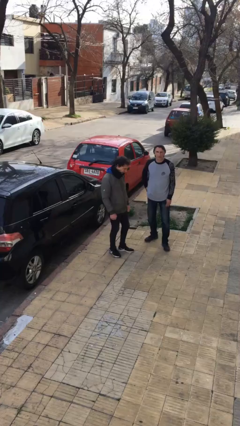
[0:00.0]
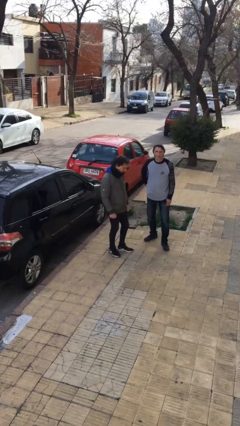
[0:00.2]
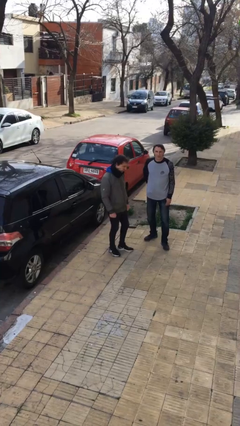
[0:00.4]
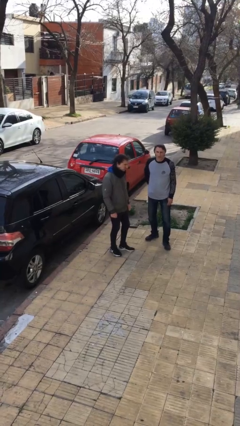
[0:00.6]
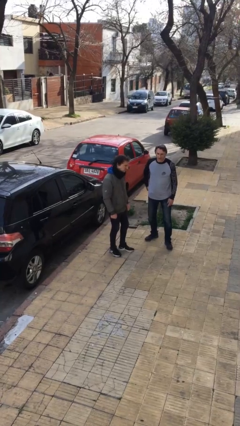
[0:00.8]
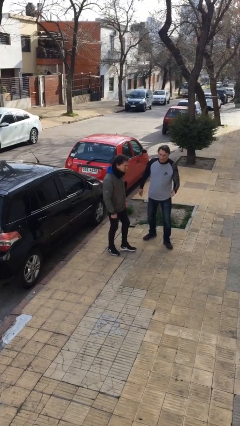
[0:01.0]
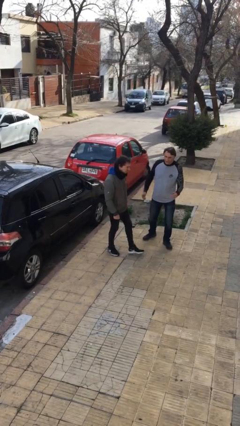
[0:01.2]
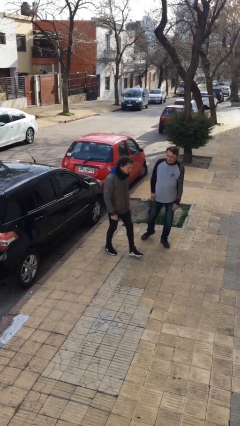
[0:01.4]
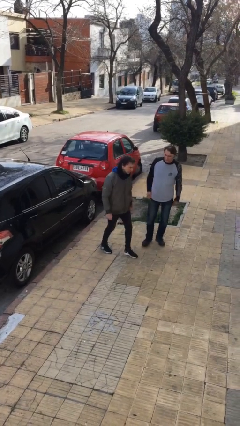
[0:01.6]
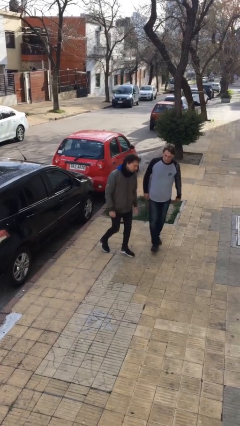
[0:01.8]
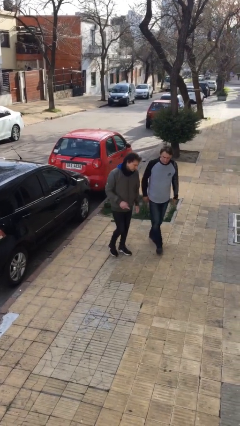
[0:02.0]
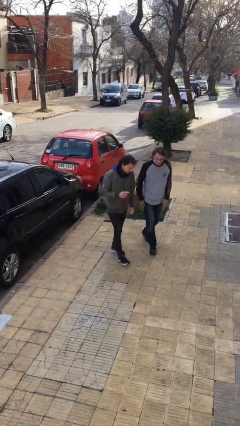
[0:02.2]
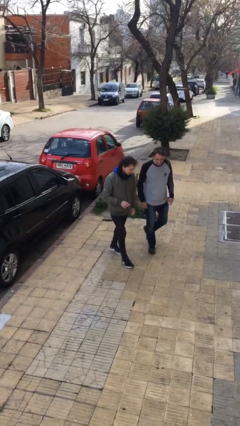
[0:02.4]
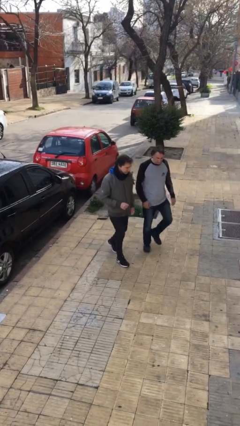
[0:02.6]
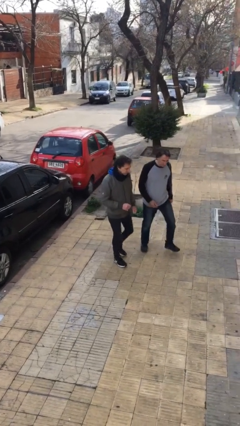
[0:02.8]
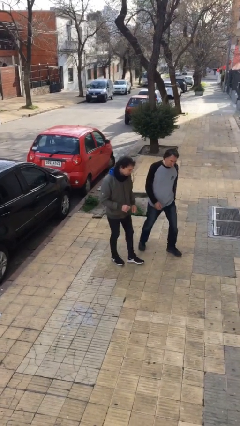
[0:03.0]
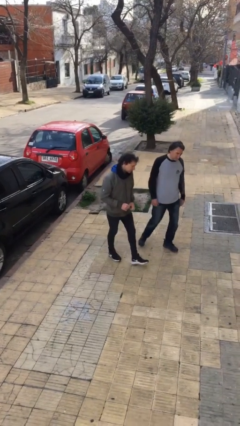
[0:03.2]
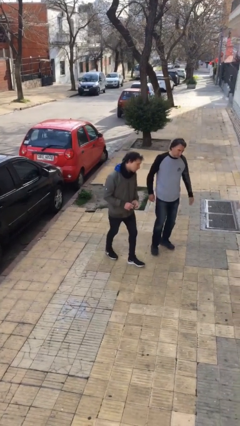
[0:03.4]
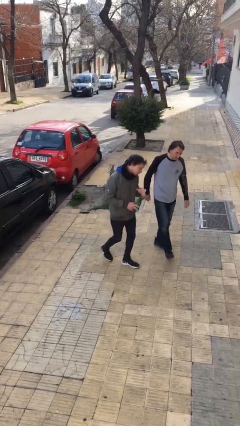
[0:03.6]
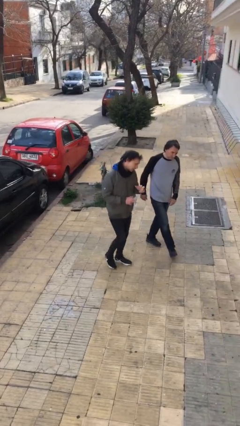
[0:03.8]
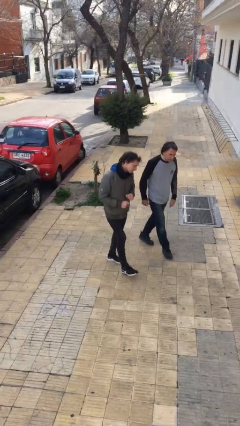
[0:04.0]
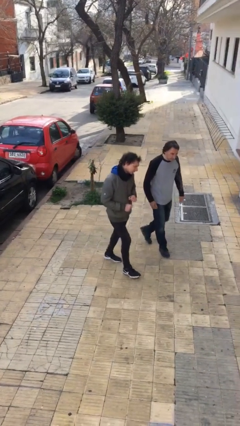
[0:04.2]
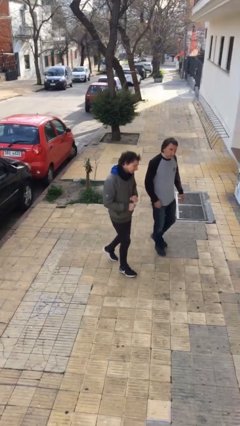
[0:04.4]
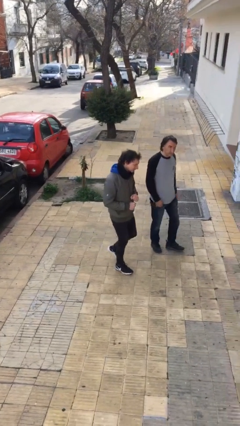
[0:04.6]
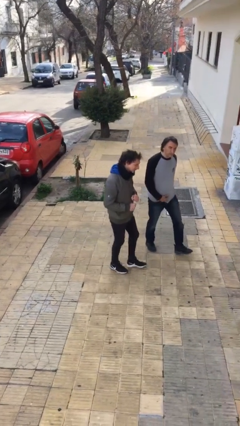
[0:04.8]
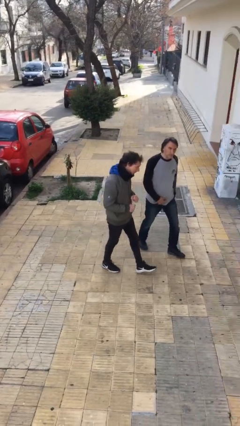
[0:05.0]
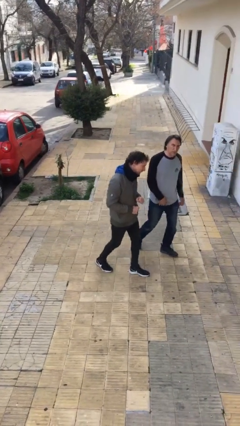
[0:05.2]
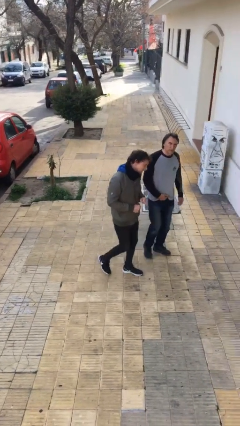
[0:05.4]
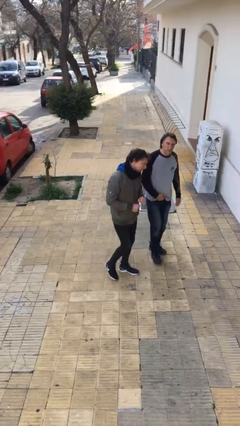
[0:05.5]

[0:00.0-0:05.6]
person talks to person

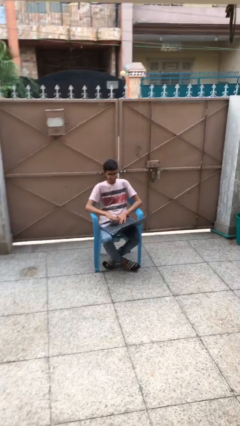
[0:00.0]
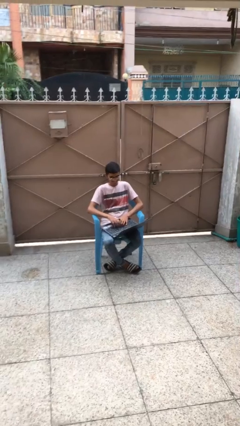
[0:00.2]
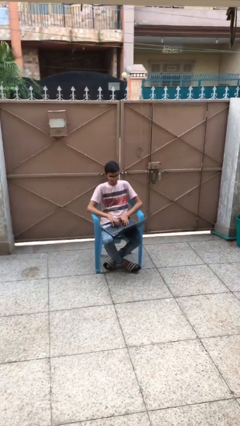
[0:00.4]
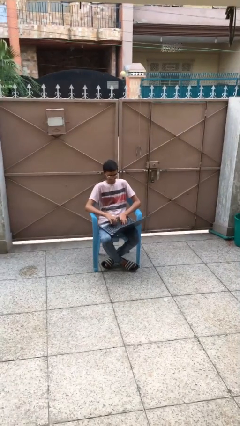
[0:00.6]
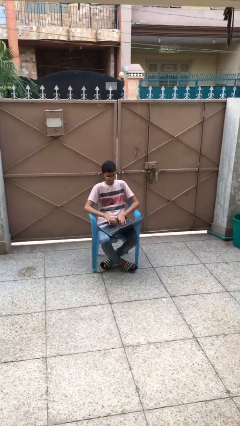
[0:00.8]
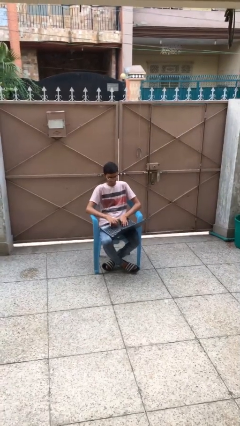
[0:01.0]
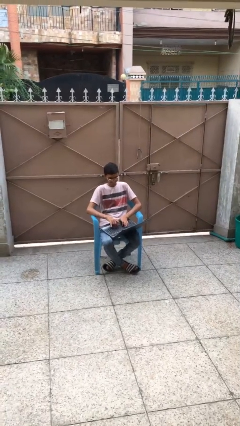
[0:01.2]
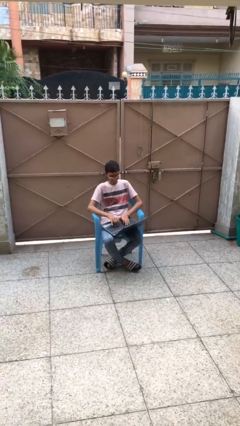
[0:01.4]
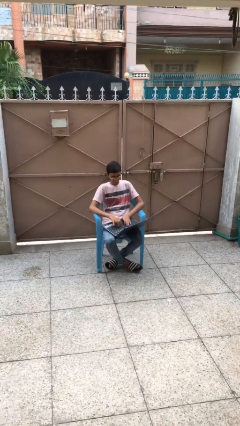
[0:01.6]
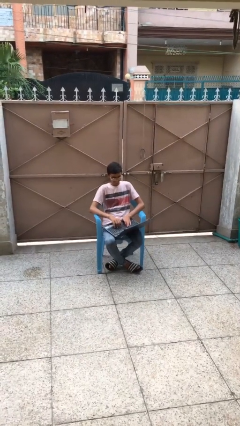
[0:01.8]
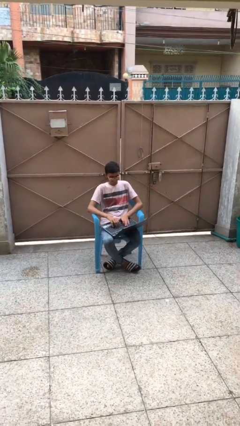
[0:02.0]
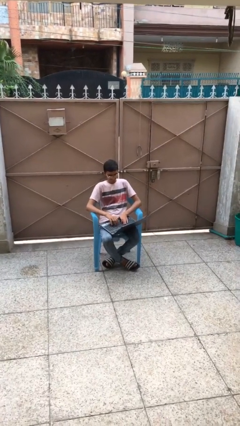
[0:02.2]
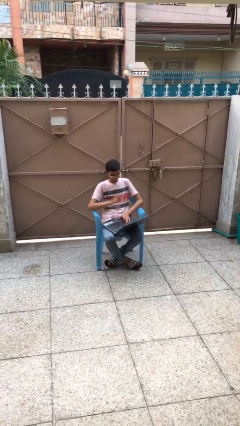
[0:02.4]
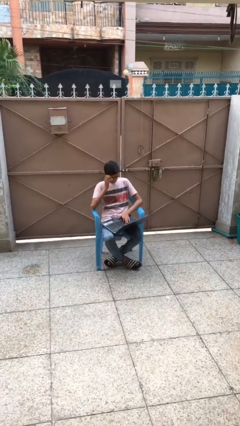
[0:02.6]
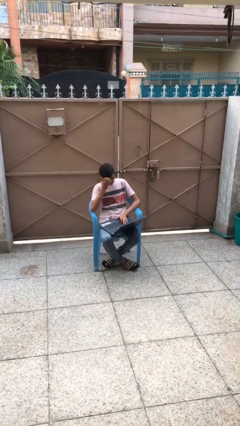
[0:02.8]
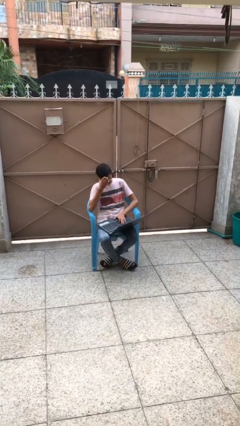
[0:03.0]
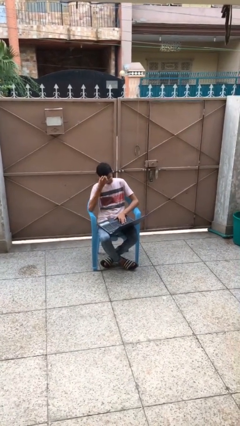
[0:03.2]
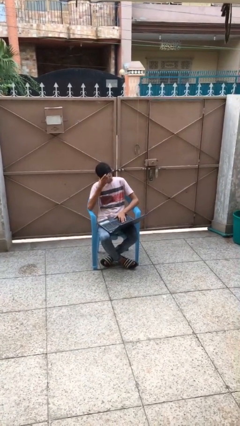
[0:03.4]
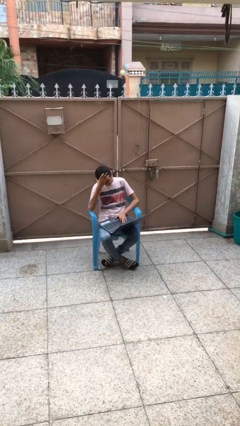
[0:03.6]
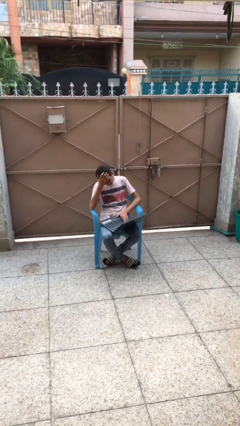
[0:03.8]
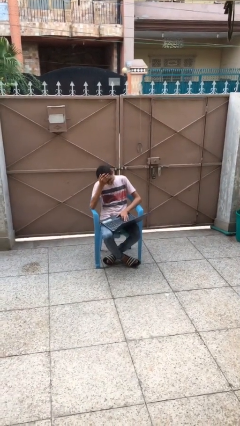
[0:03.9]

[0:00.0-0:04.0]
person interacts with laptop

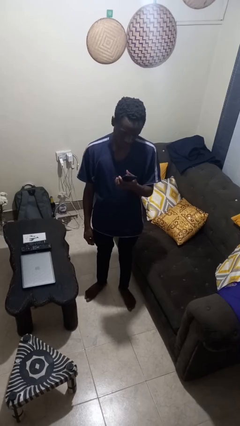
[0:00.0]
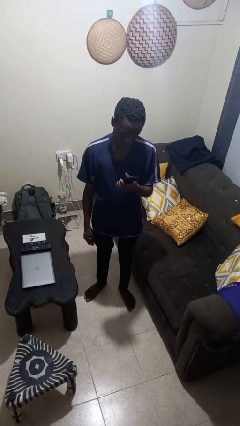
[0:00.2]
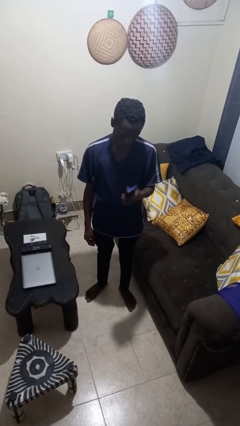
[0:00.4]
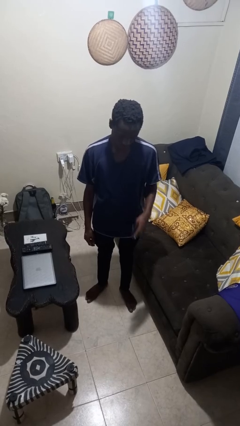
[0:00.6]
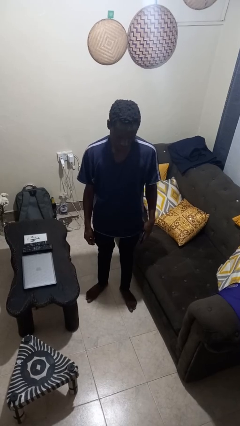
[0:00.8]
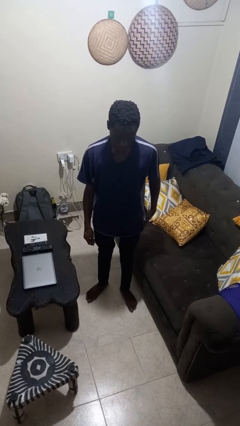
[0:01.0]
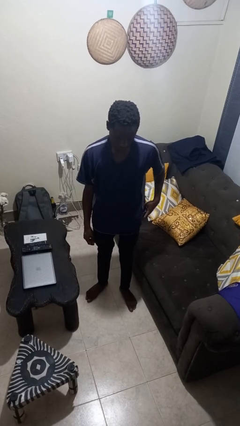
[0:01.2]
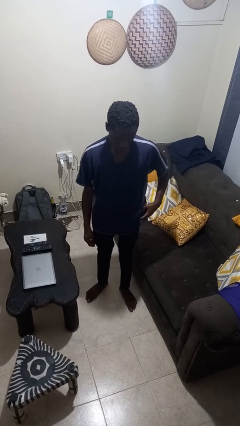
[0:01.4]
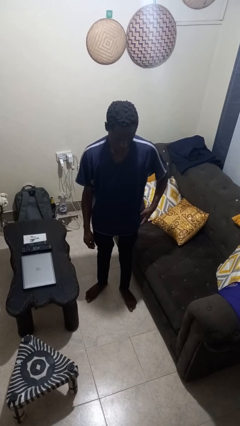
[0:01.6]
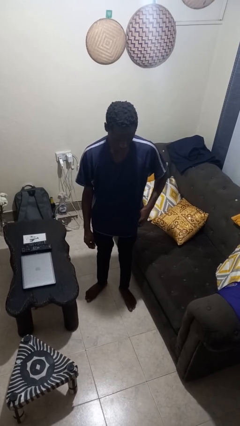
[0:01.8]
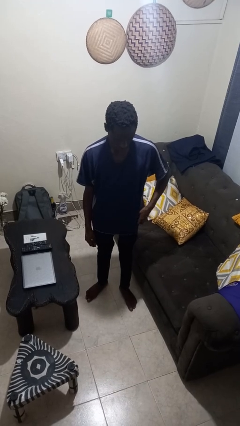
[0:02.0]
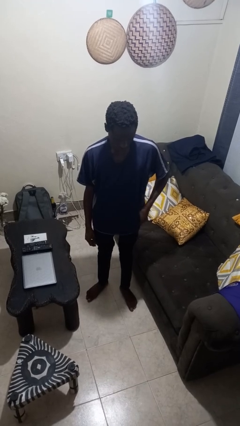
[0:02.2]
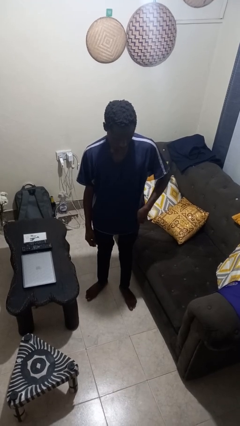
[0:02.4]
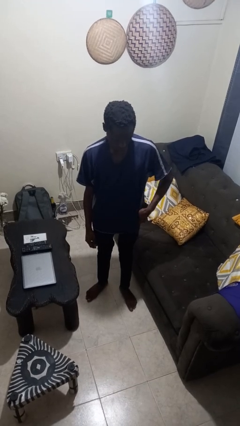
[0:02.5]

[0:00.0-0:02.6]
person puts phone into pocket

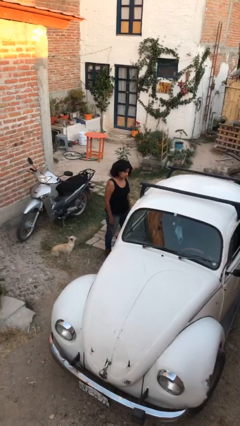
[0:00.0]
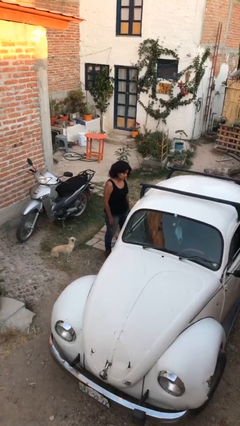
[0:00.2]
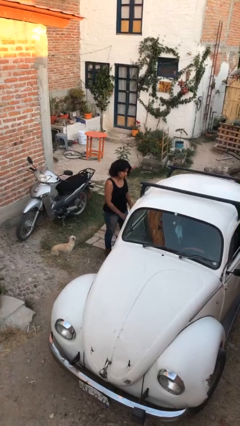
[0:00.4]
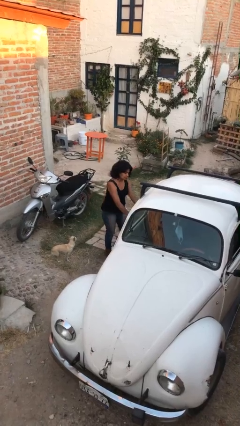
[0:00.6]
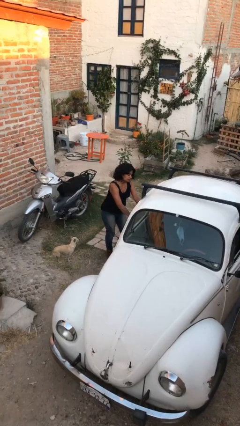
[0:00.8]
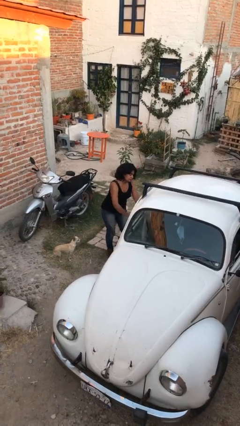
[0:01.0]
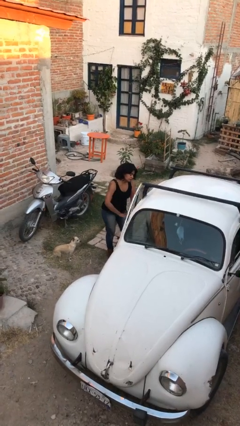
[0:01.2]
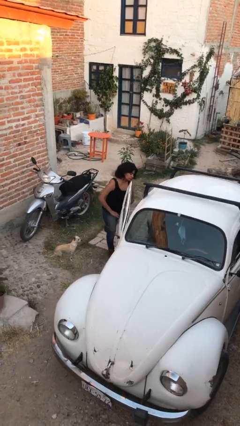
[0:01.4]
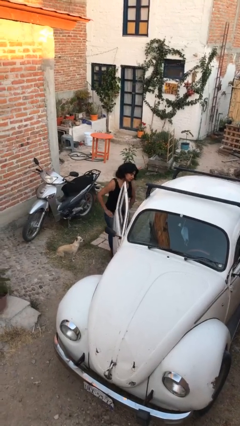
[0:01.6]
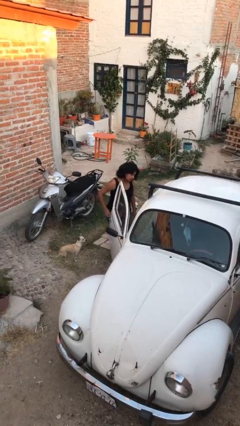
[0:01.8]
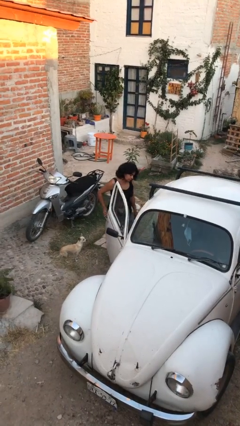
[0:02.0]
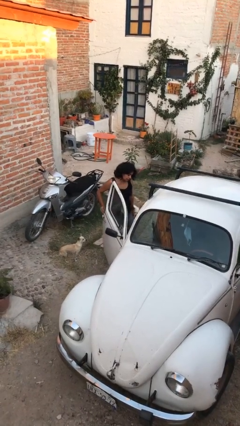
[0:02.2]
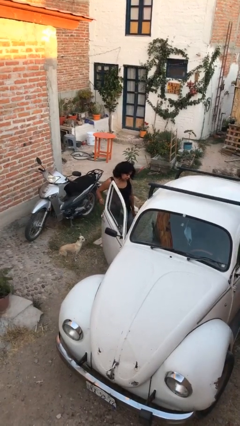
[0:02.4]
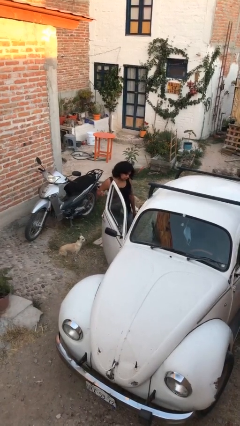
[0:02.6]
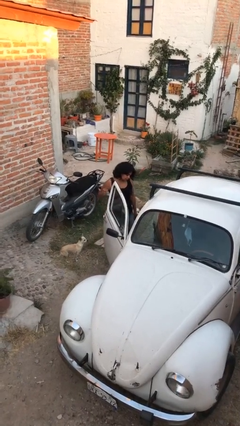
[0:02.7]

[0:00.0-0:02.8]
person opens car door

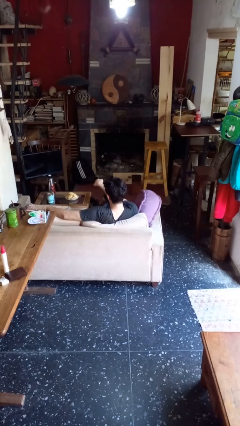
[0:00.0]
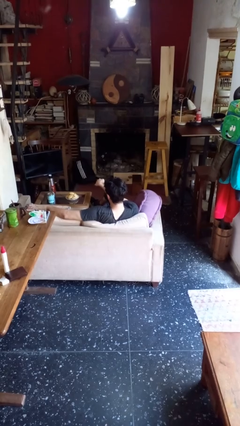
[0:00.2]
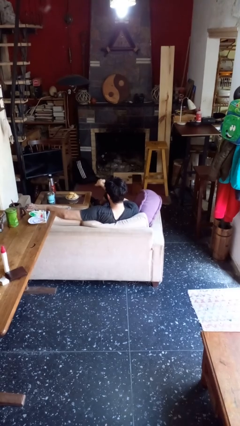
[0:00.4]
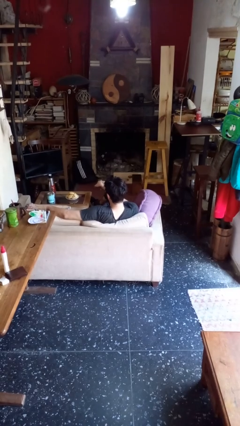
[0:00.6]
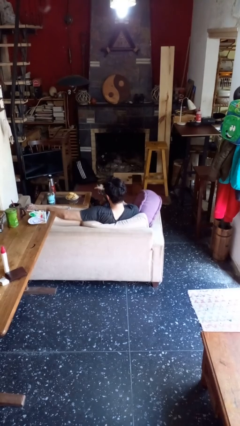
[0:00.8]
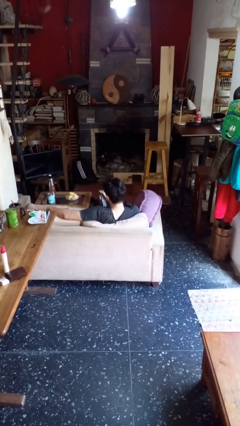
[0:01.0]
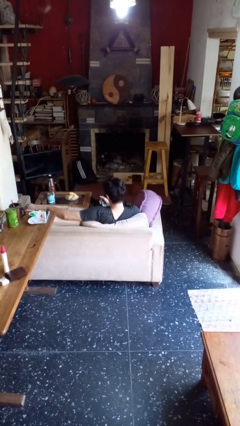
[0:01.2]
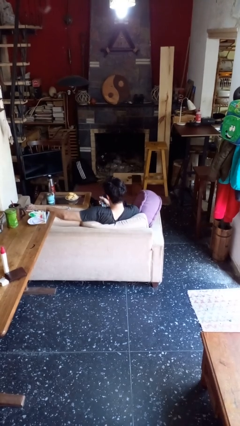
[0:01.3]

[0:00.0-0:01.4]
person uses television remote

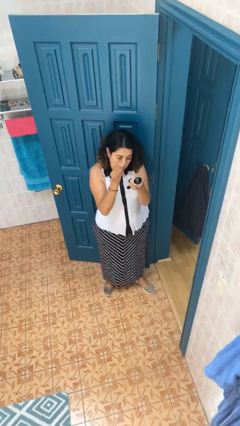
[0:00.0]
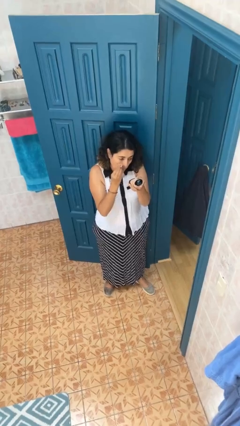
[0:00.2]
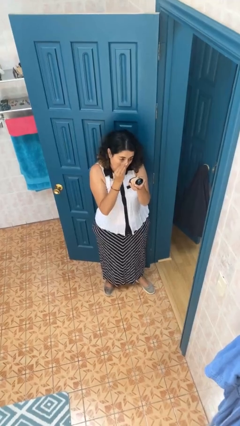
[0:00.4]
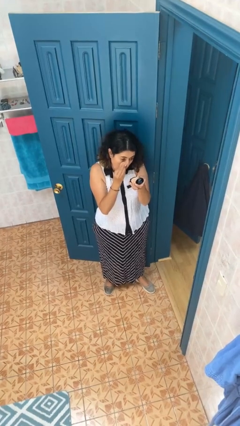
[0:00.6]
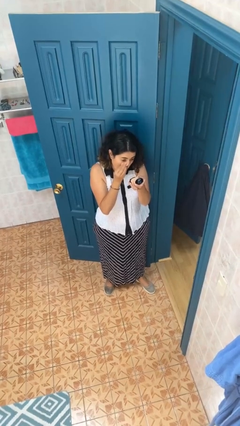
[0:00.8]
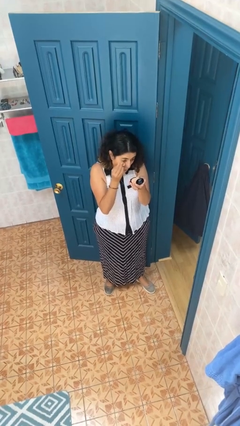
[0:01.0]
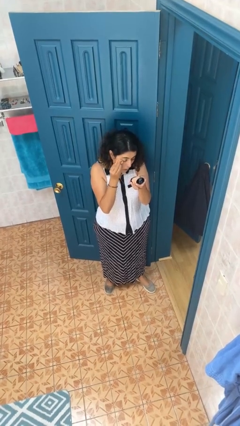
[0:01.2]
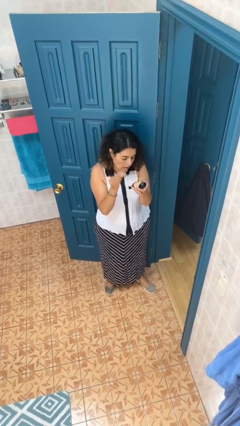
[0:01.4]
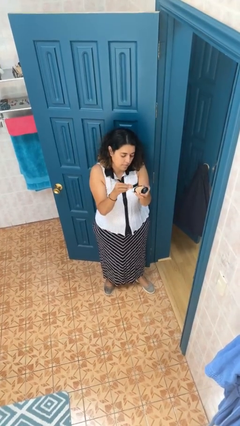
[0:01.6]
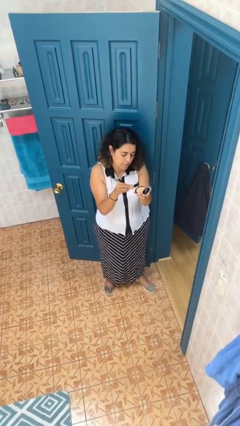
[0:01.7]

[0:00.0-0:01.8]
person applies foundation makeup
